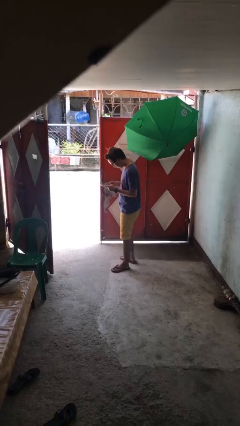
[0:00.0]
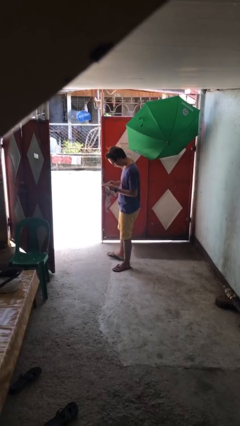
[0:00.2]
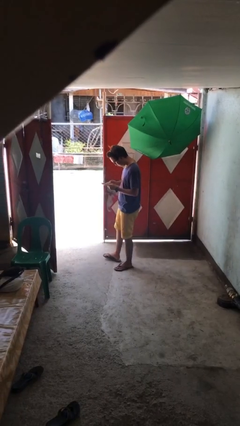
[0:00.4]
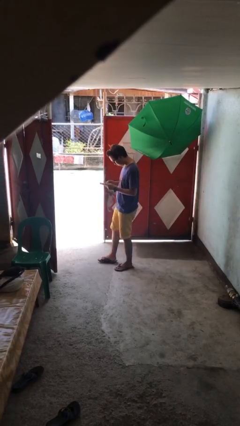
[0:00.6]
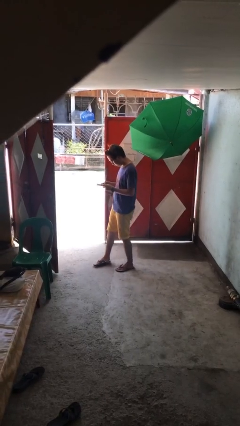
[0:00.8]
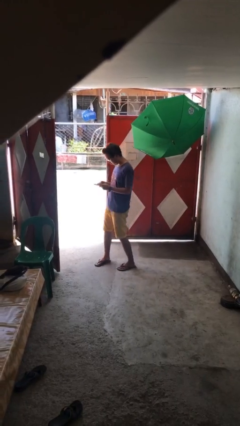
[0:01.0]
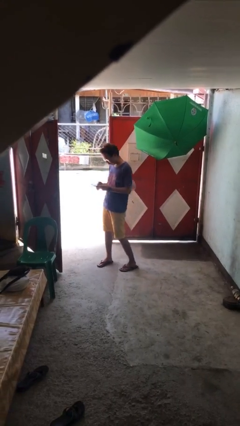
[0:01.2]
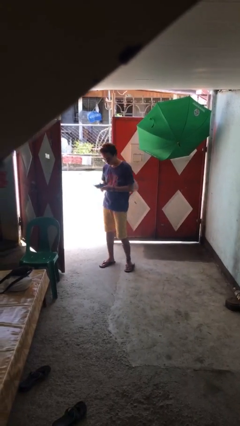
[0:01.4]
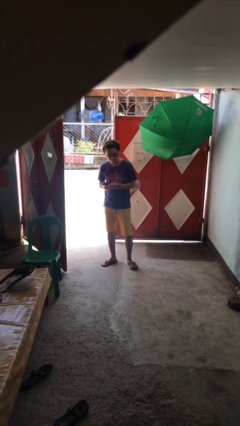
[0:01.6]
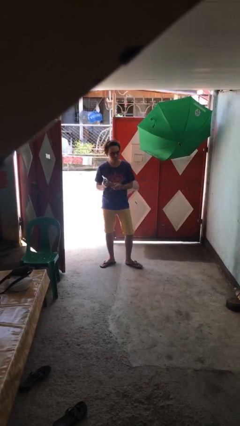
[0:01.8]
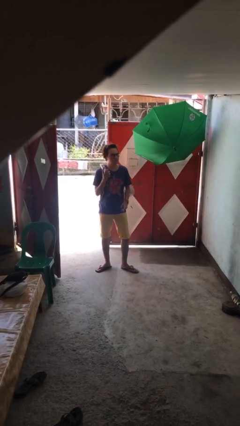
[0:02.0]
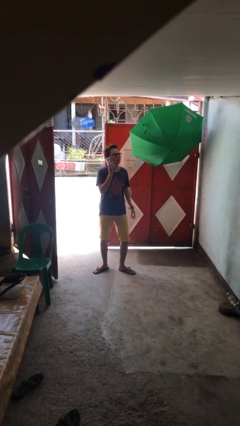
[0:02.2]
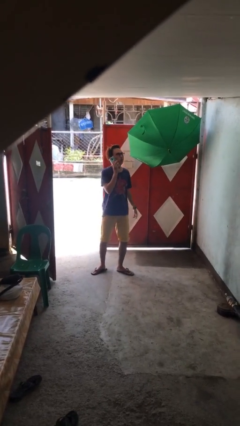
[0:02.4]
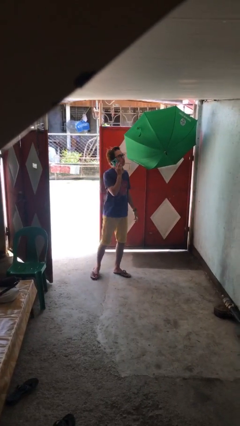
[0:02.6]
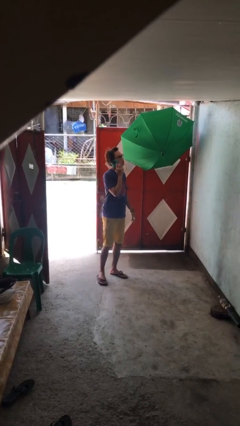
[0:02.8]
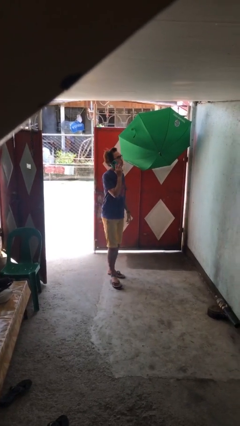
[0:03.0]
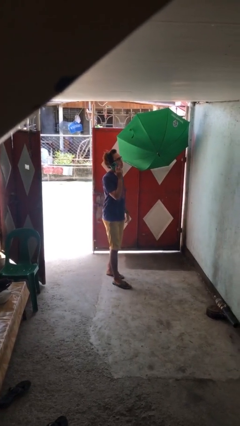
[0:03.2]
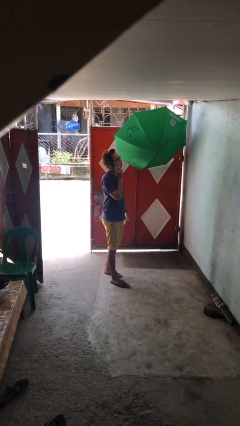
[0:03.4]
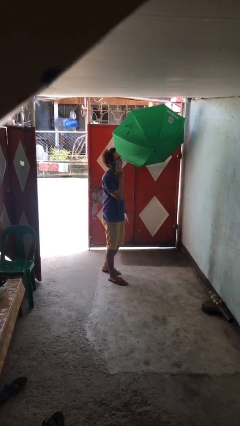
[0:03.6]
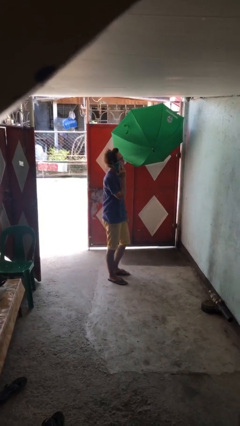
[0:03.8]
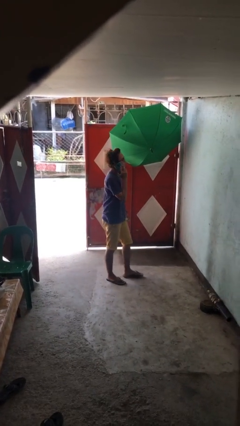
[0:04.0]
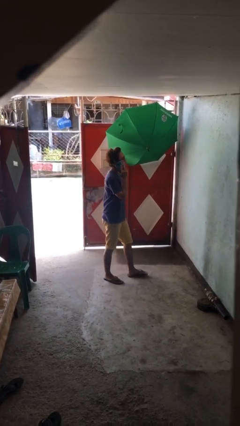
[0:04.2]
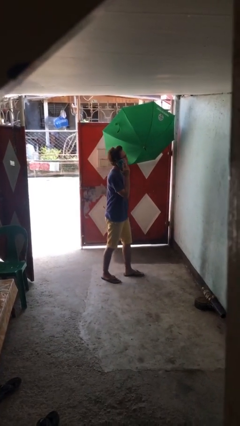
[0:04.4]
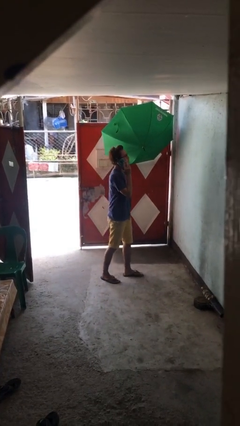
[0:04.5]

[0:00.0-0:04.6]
person talks on phone

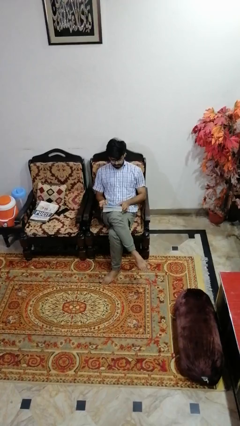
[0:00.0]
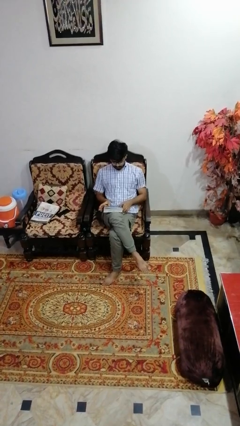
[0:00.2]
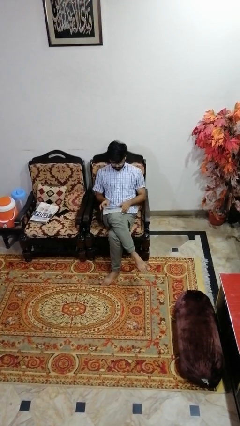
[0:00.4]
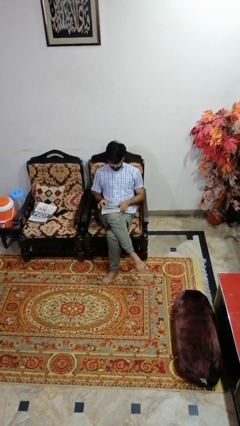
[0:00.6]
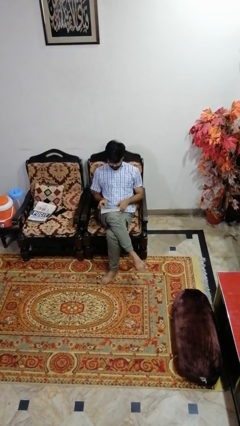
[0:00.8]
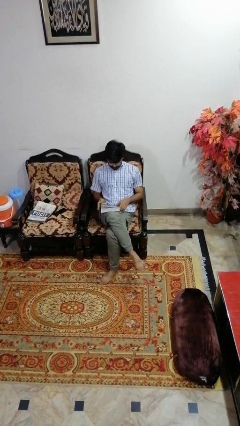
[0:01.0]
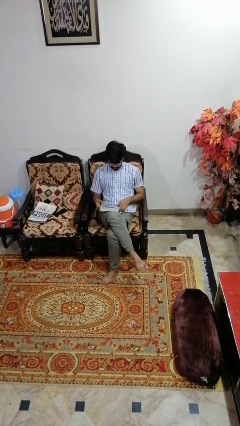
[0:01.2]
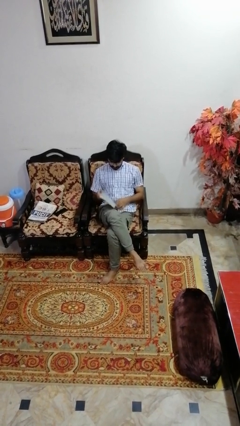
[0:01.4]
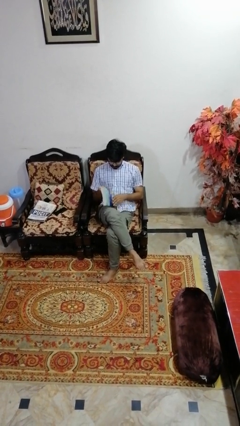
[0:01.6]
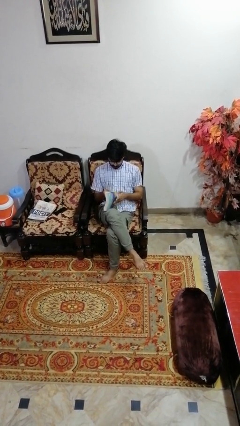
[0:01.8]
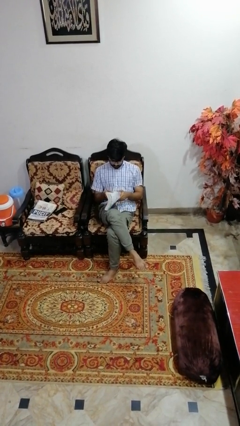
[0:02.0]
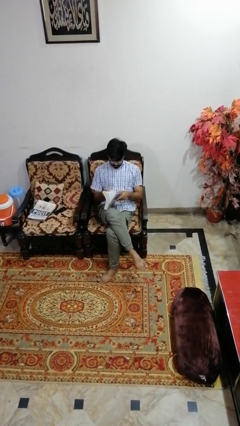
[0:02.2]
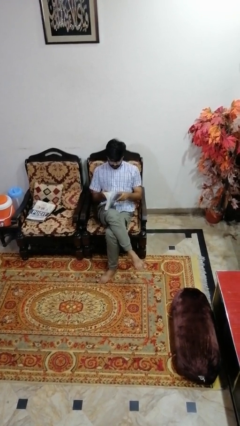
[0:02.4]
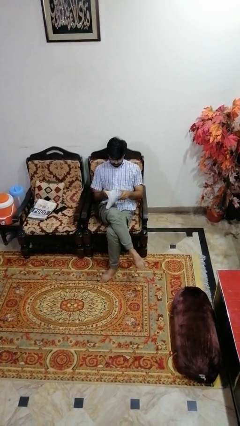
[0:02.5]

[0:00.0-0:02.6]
person looks at wristwatch

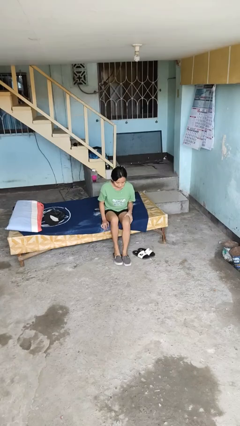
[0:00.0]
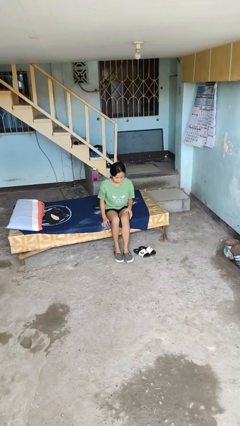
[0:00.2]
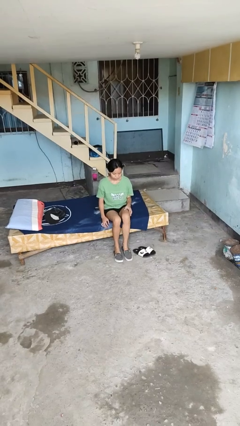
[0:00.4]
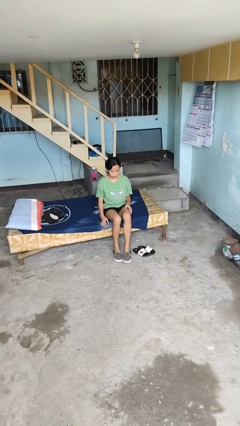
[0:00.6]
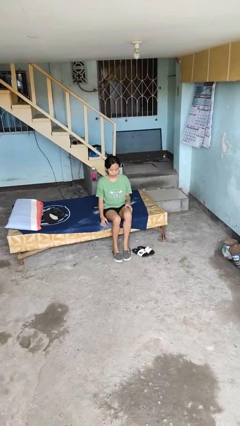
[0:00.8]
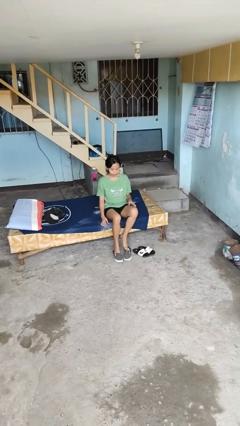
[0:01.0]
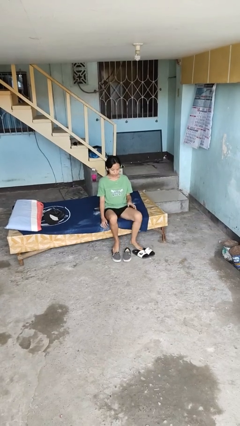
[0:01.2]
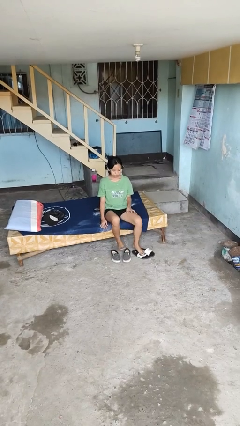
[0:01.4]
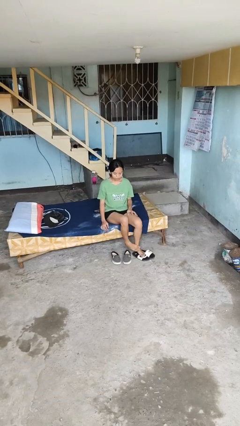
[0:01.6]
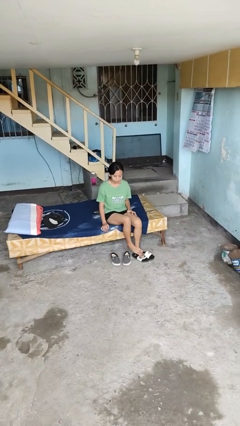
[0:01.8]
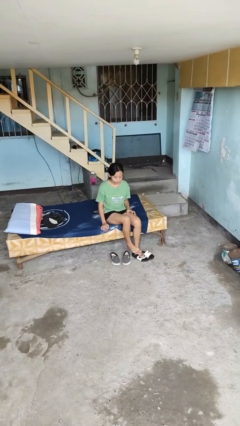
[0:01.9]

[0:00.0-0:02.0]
person takes off shoes

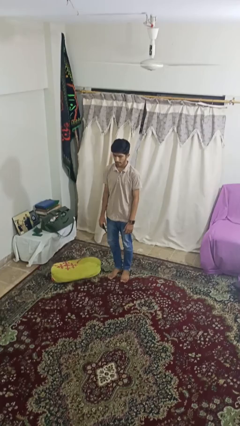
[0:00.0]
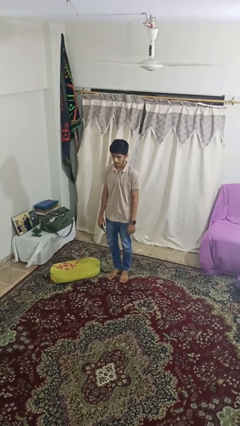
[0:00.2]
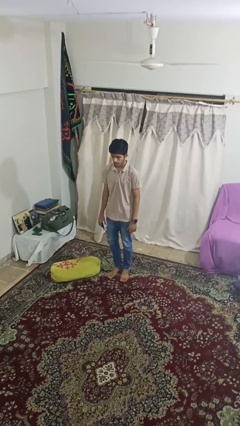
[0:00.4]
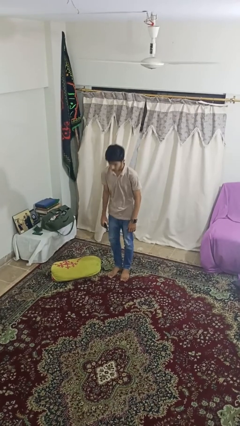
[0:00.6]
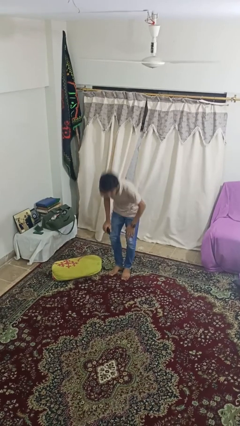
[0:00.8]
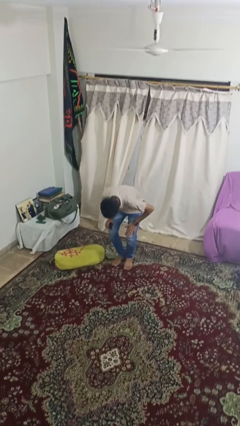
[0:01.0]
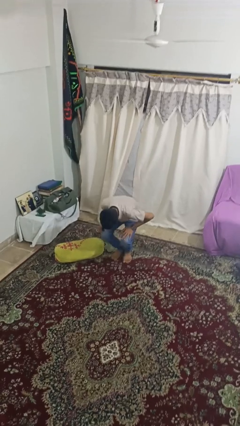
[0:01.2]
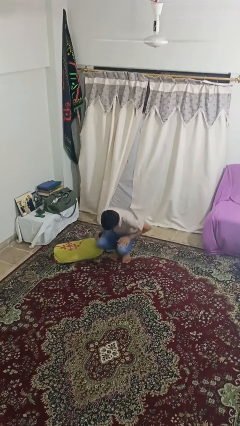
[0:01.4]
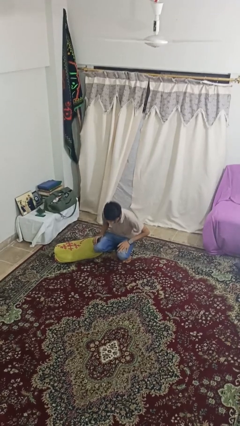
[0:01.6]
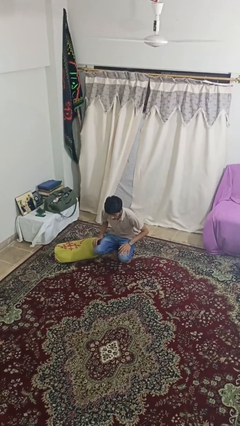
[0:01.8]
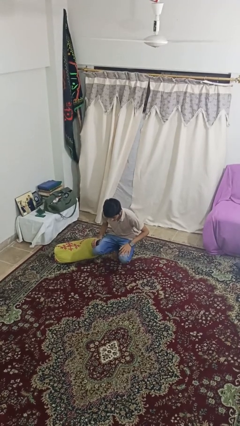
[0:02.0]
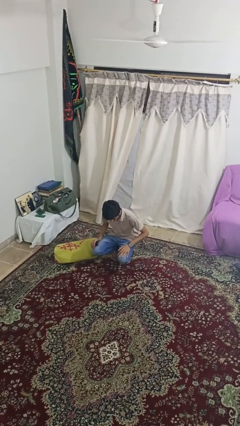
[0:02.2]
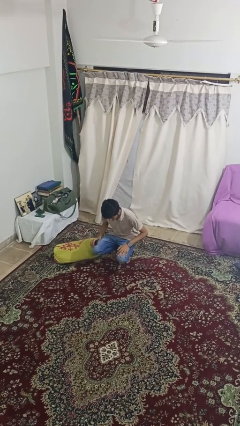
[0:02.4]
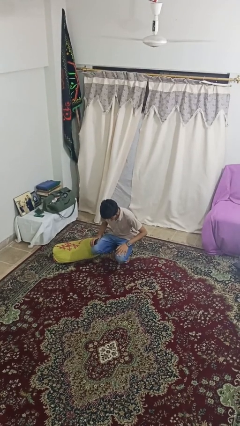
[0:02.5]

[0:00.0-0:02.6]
person squats

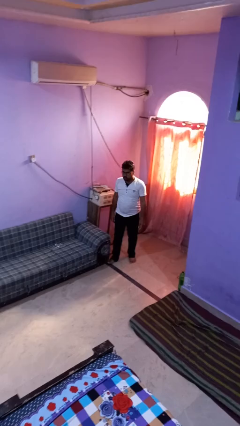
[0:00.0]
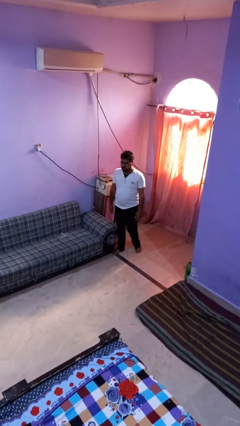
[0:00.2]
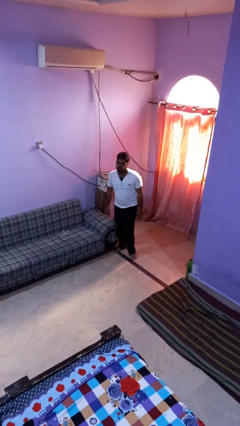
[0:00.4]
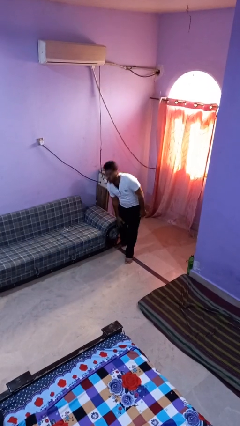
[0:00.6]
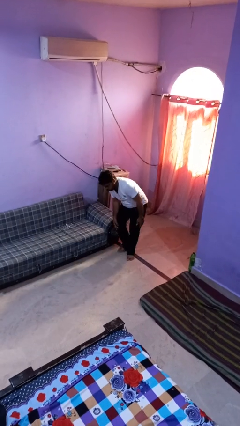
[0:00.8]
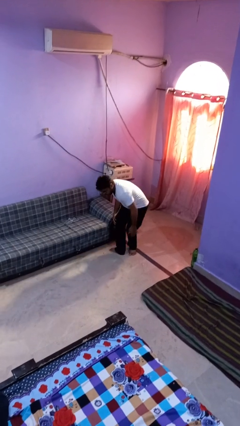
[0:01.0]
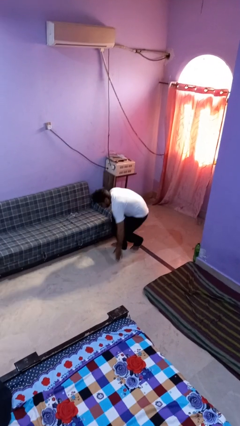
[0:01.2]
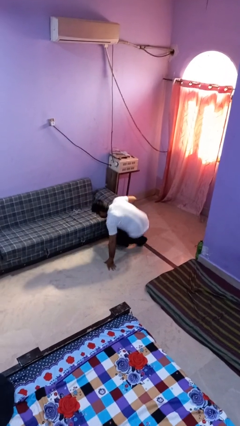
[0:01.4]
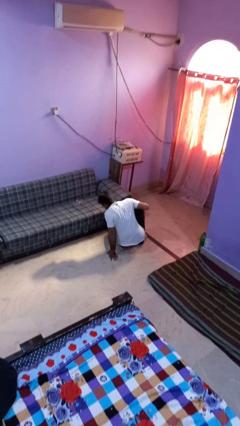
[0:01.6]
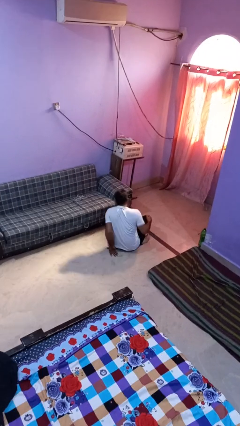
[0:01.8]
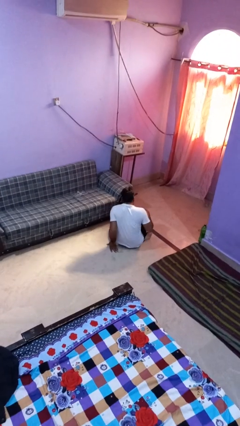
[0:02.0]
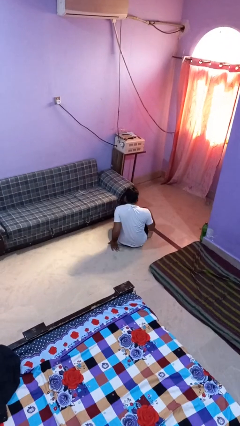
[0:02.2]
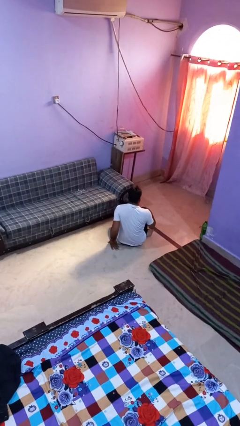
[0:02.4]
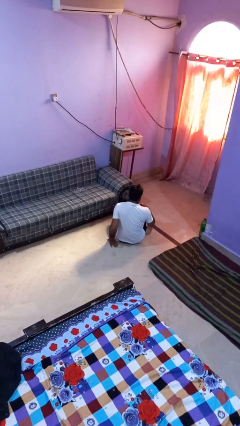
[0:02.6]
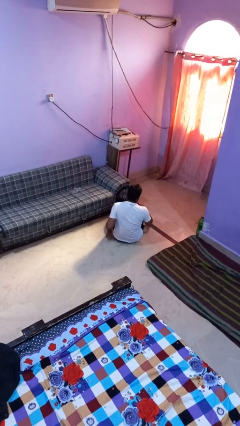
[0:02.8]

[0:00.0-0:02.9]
person trips on object on floor

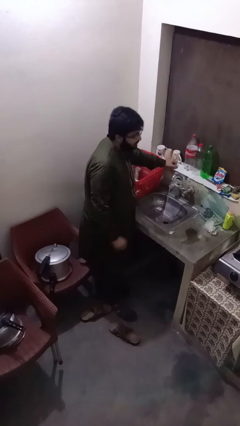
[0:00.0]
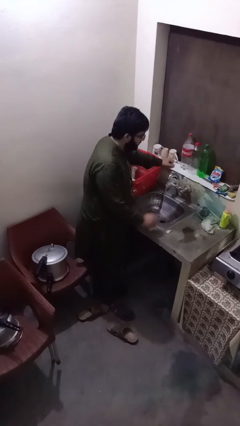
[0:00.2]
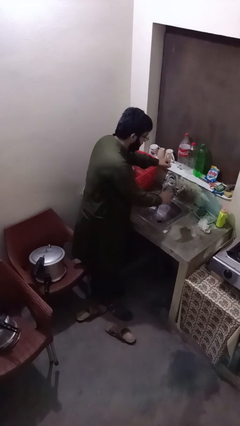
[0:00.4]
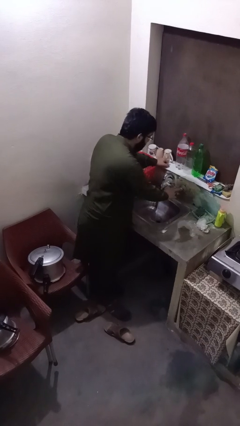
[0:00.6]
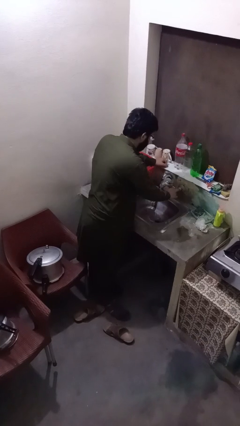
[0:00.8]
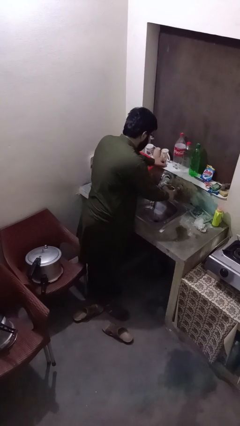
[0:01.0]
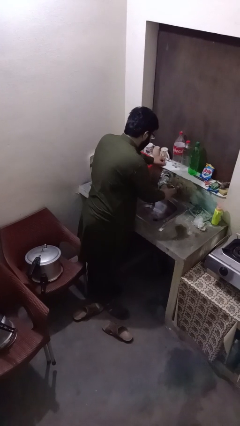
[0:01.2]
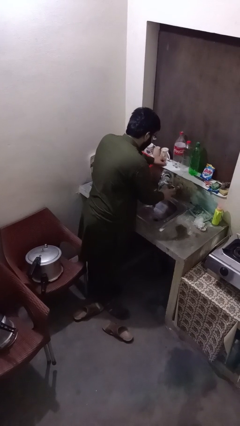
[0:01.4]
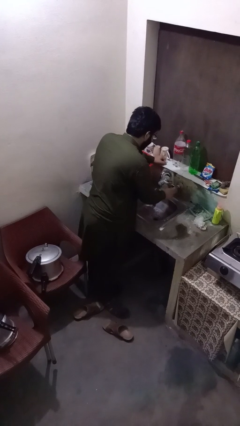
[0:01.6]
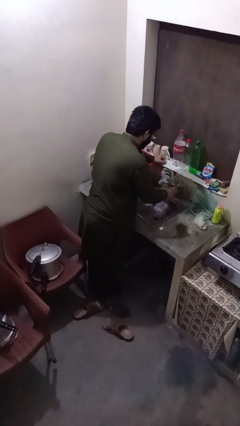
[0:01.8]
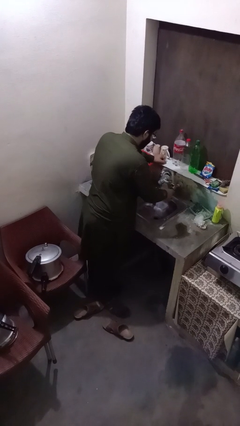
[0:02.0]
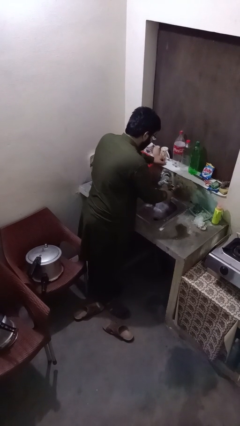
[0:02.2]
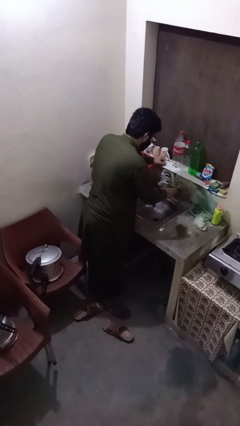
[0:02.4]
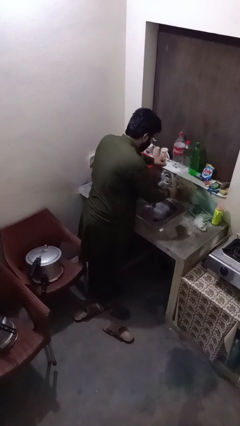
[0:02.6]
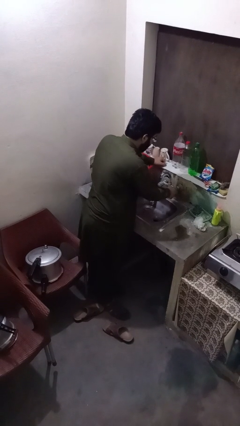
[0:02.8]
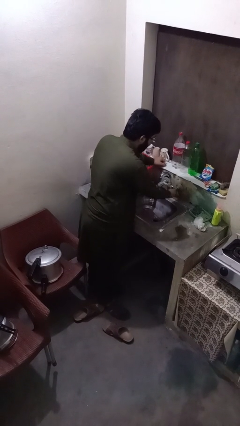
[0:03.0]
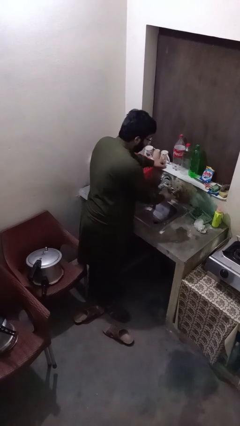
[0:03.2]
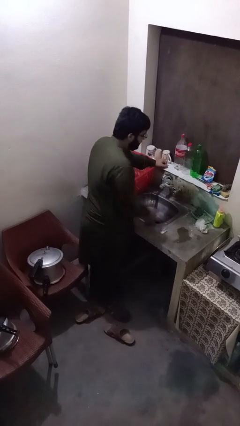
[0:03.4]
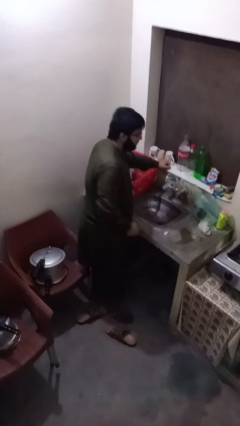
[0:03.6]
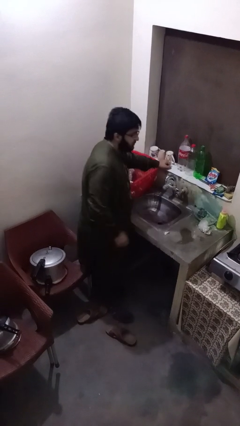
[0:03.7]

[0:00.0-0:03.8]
person turns off faucet
